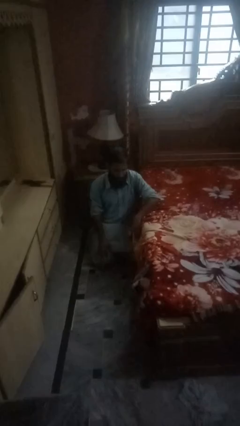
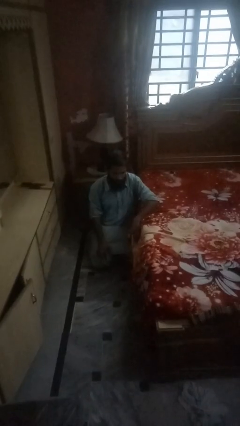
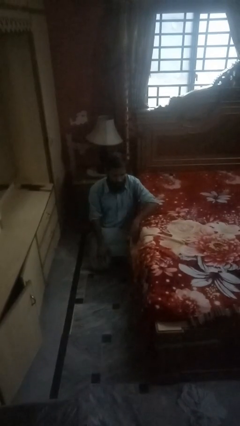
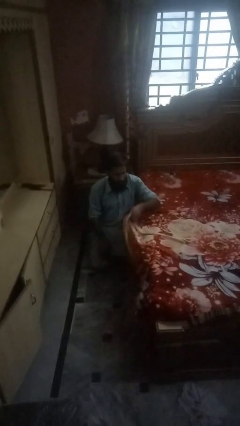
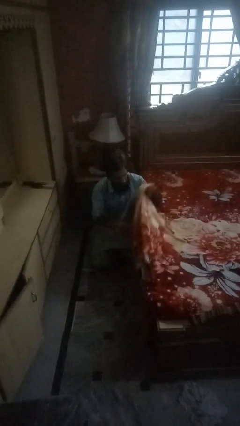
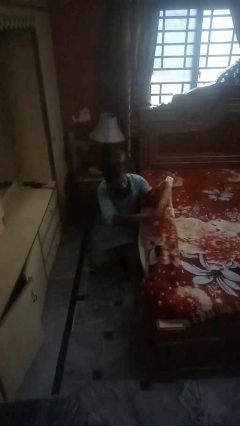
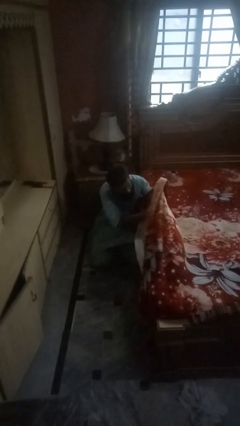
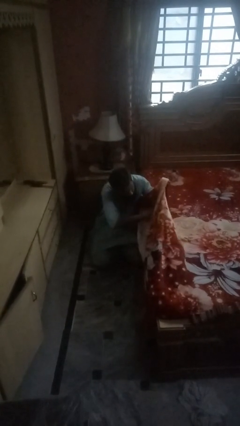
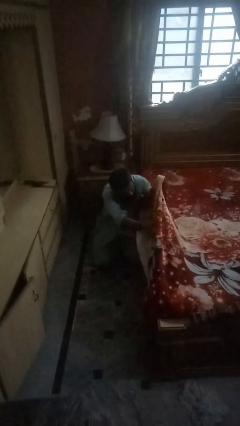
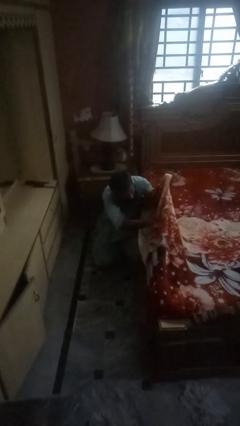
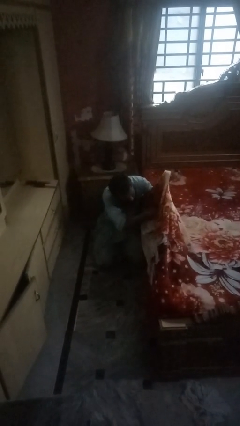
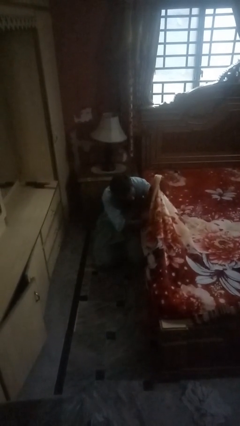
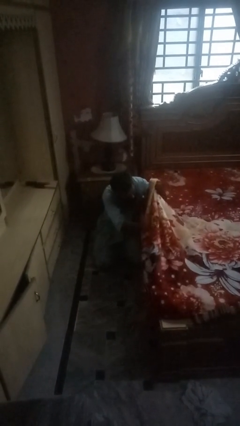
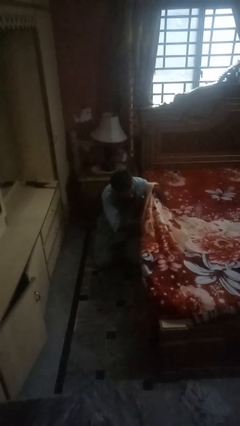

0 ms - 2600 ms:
person searches under bed

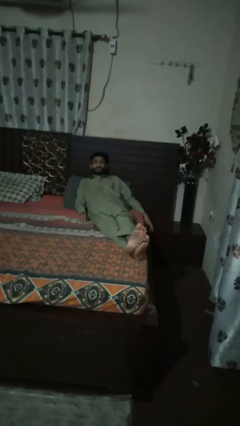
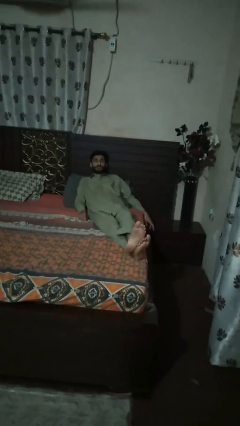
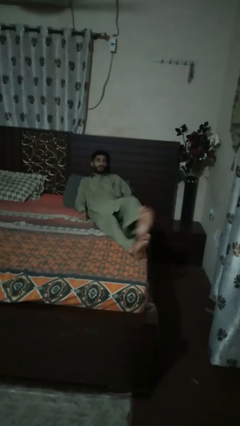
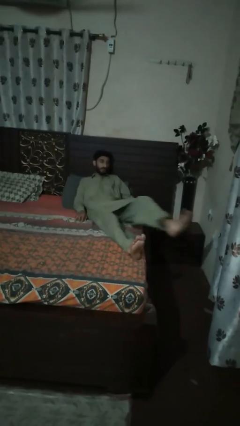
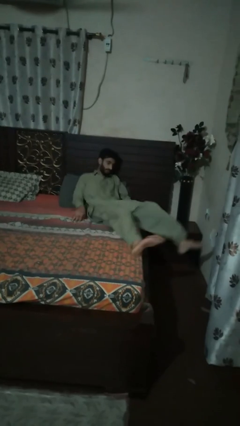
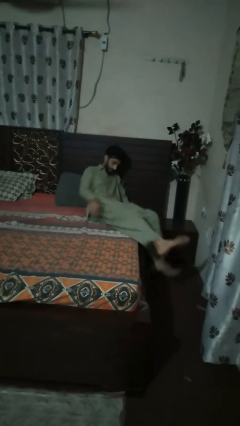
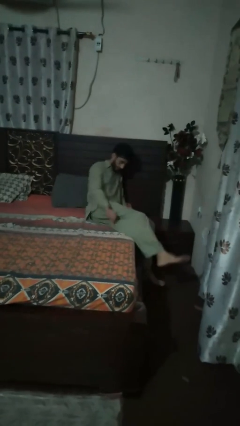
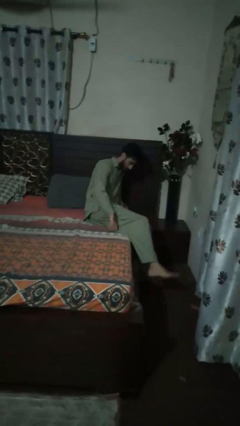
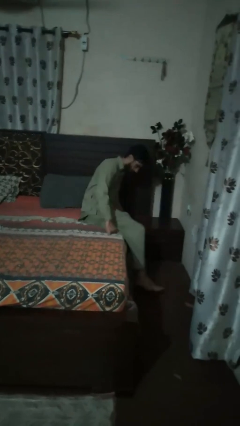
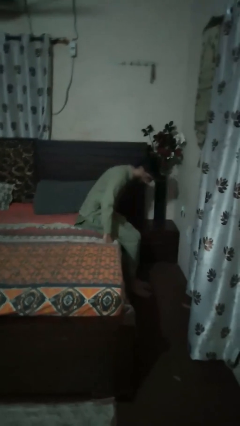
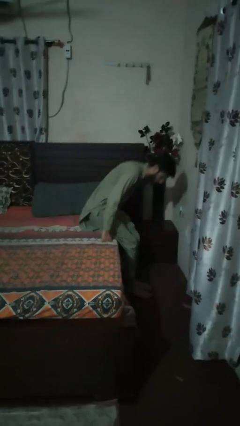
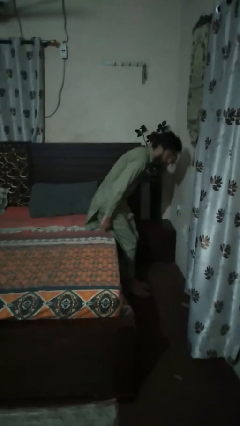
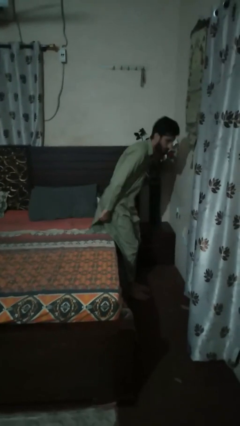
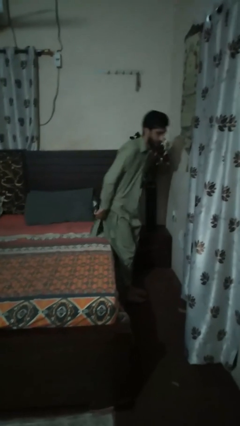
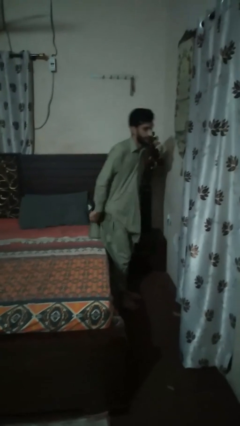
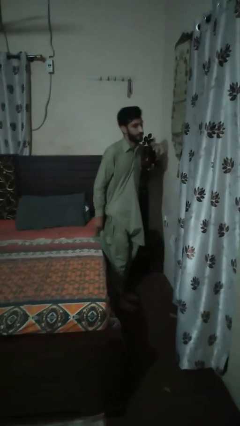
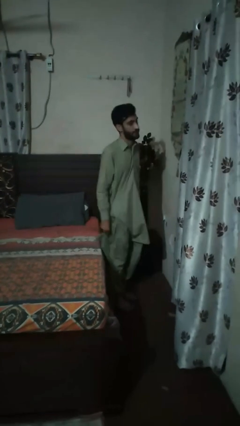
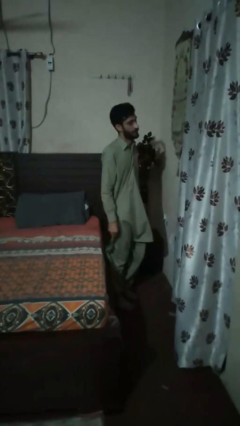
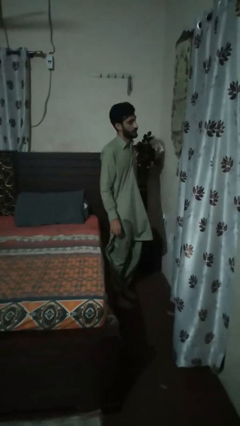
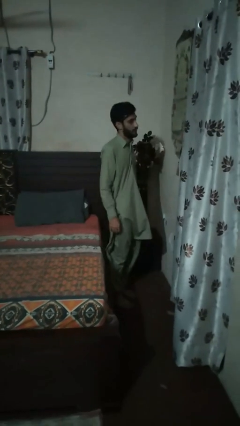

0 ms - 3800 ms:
person stands up

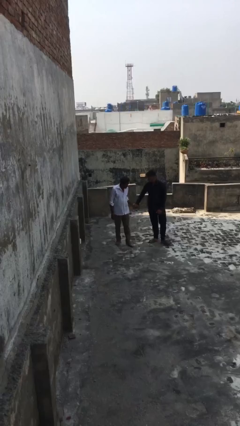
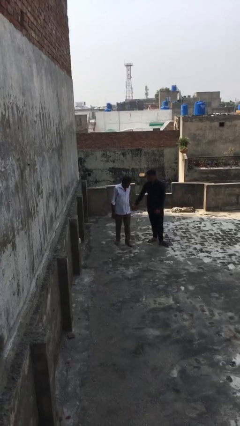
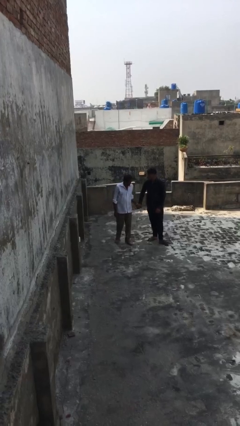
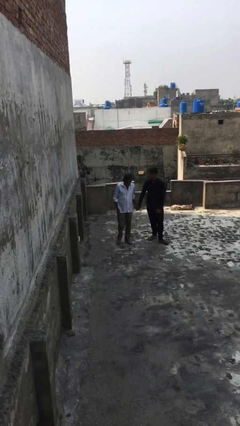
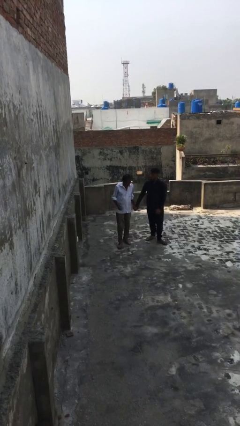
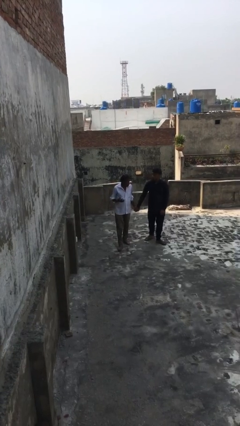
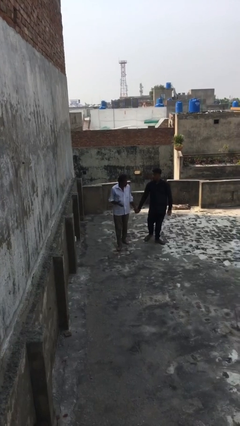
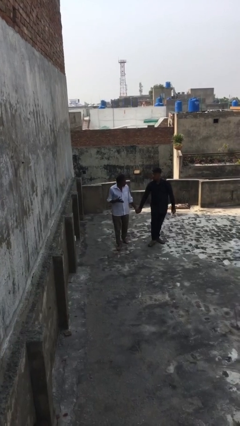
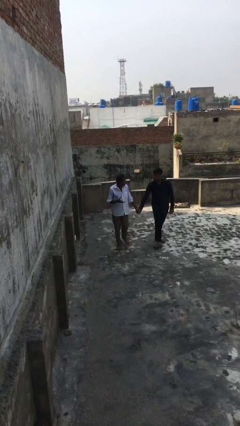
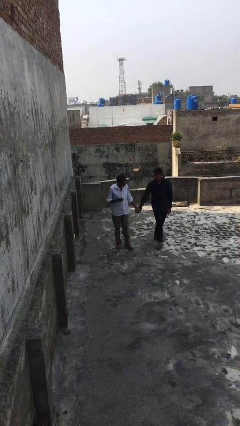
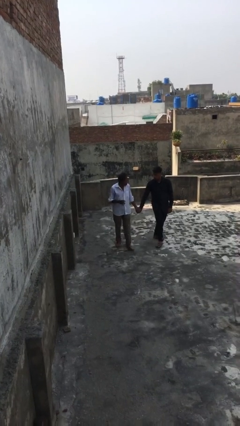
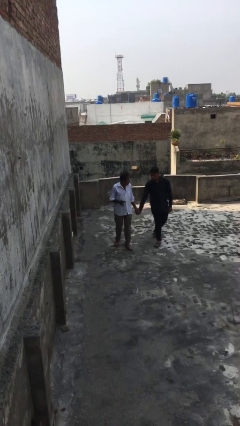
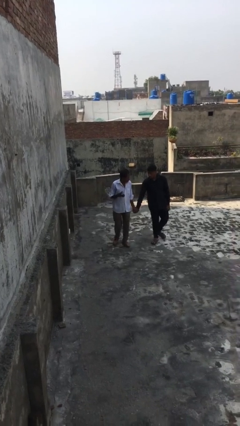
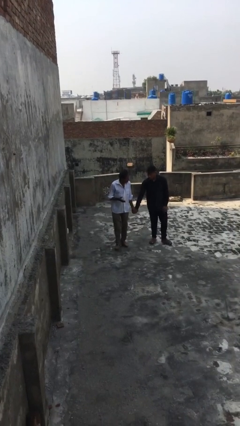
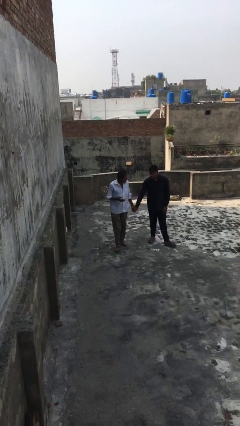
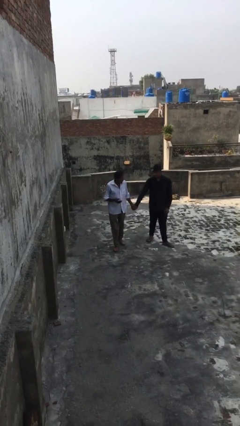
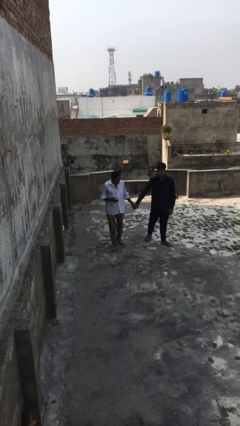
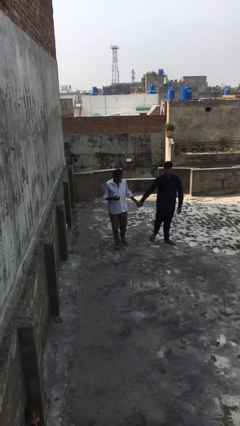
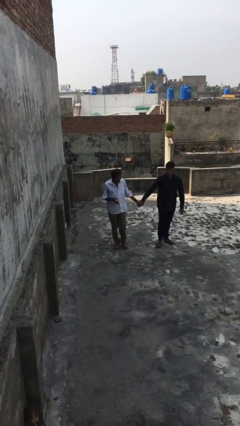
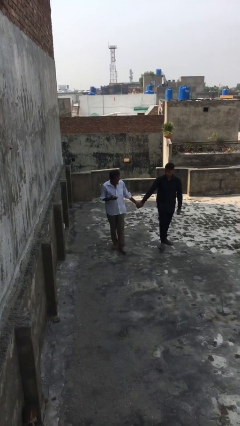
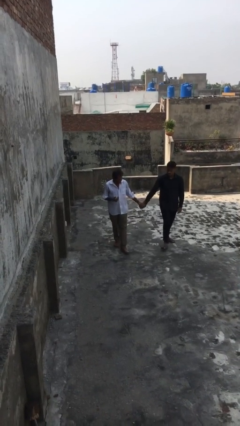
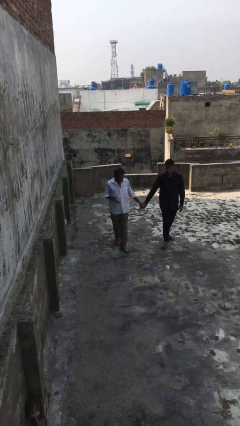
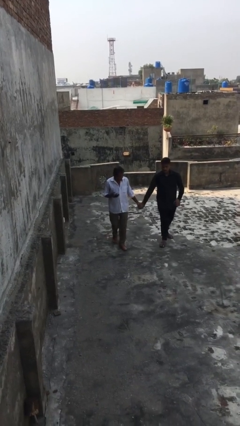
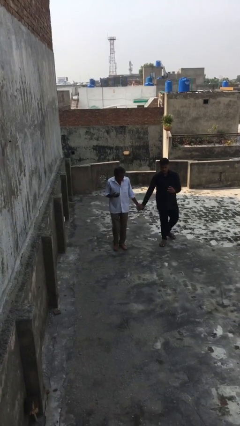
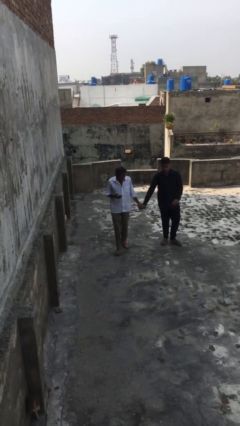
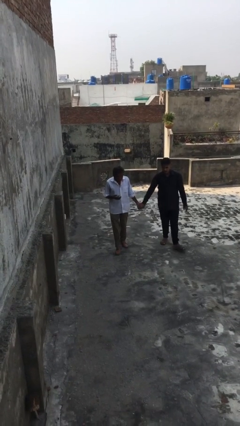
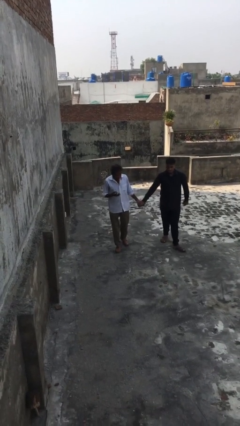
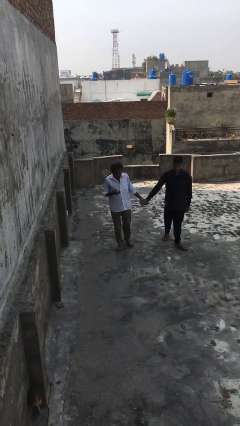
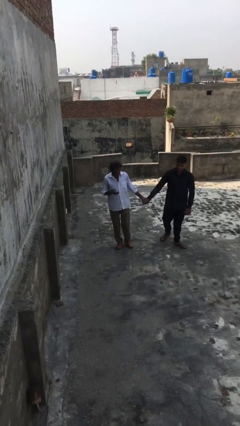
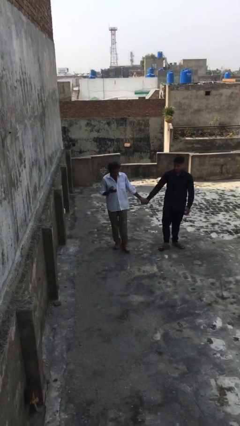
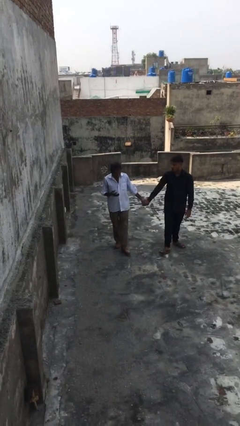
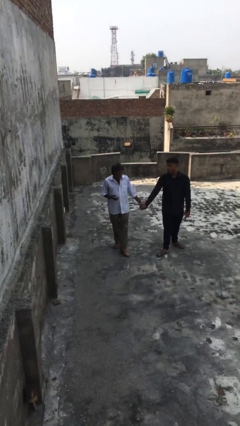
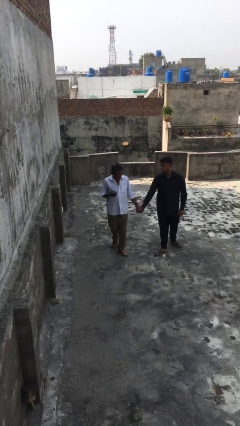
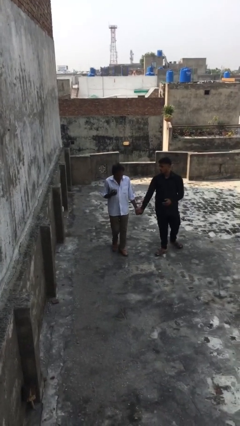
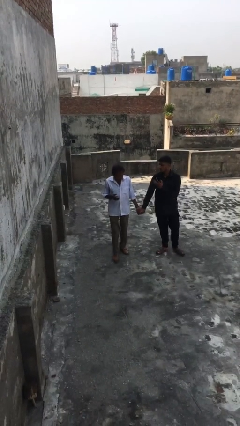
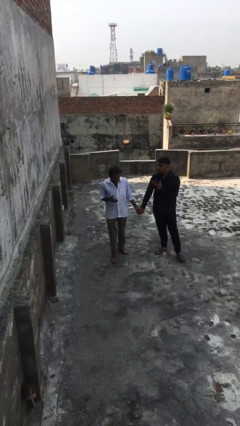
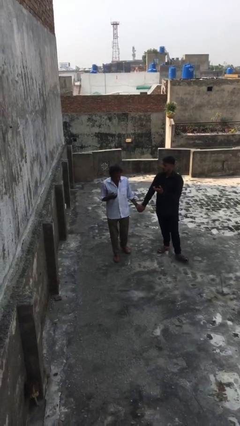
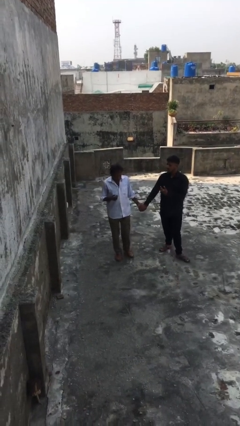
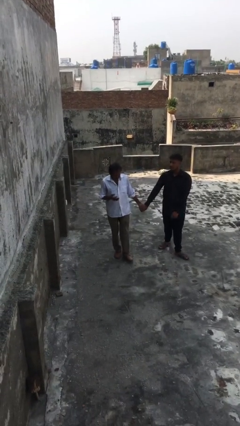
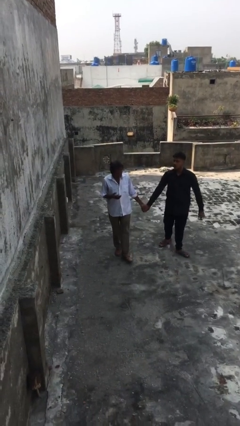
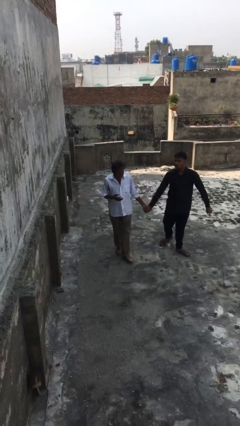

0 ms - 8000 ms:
person holds hand

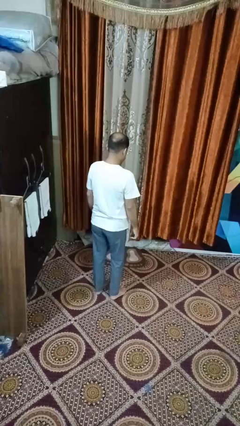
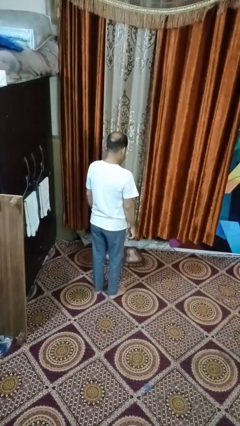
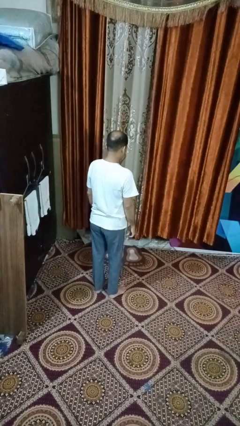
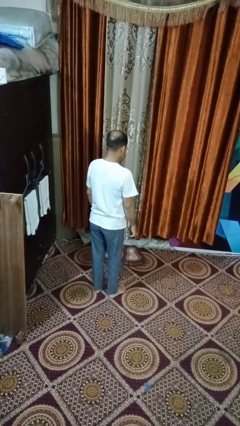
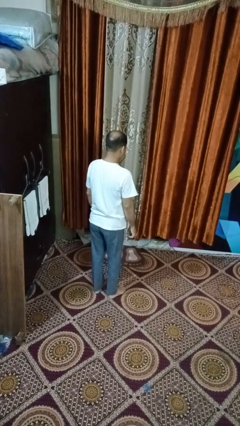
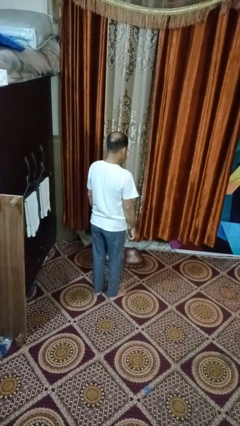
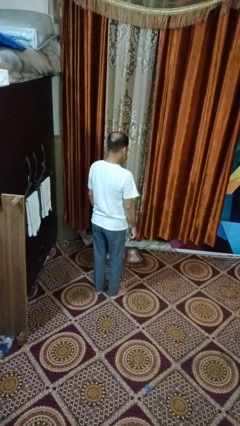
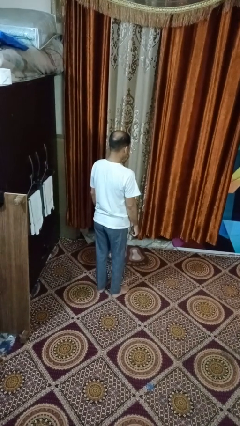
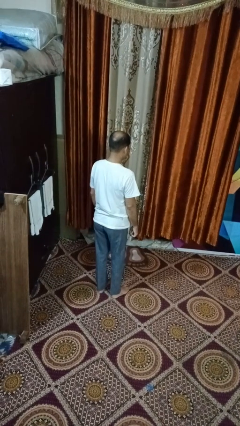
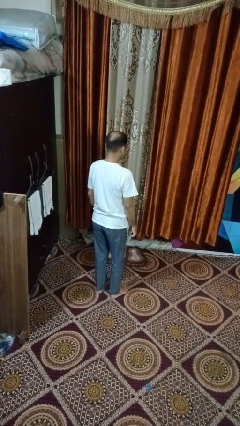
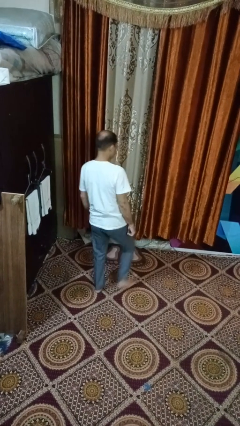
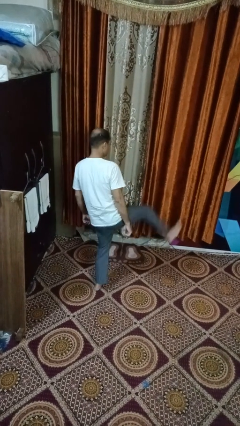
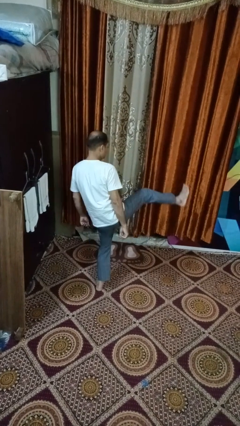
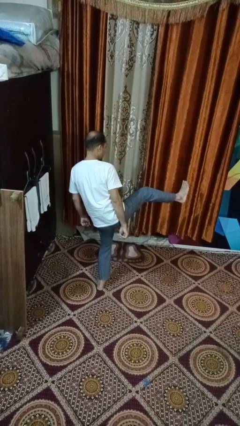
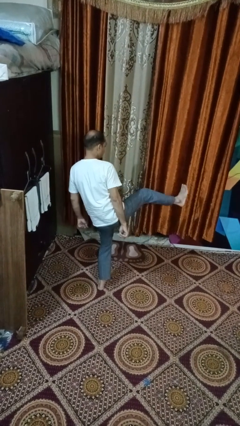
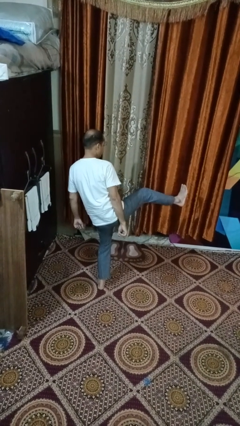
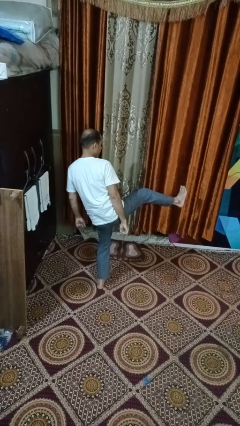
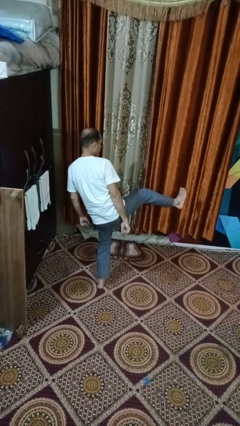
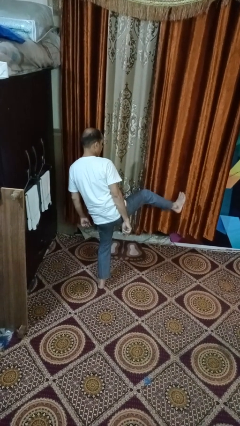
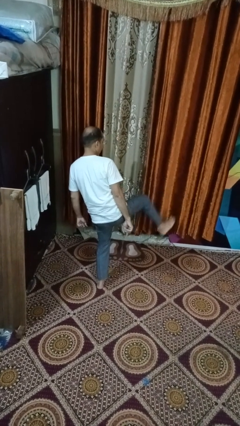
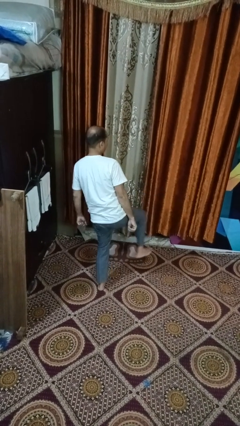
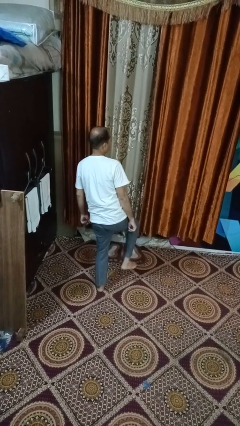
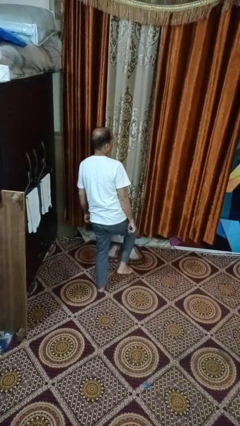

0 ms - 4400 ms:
person karate kicks
